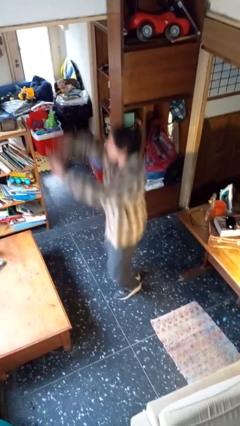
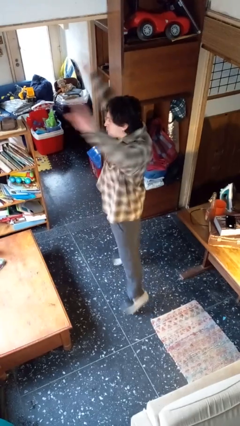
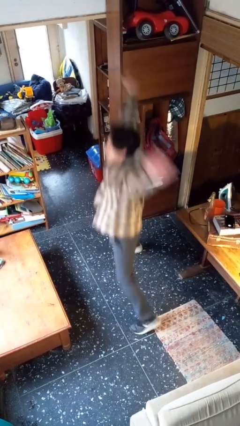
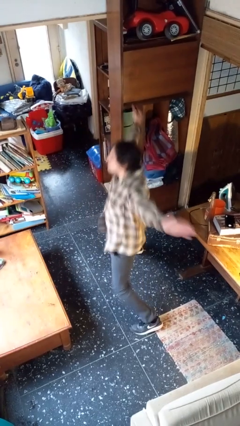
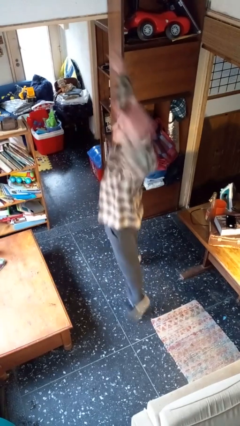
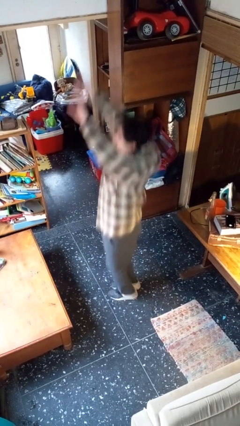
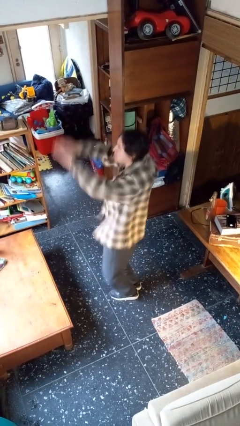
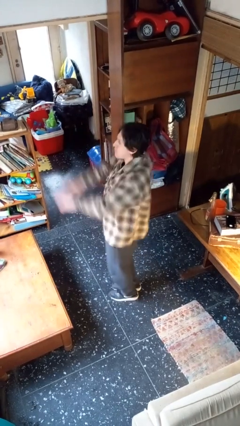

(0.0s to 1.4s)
person exercises with jumping jacks

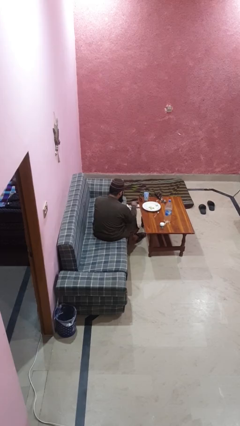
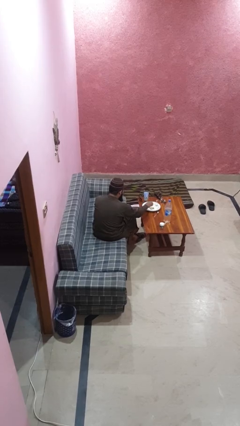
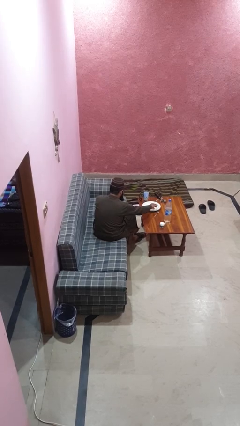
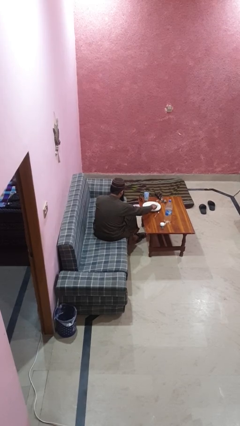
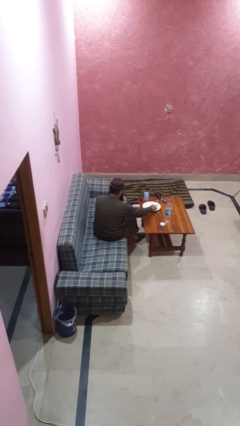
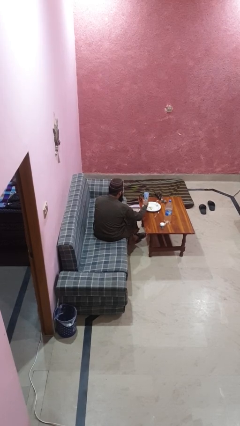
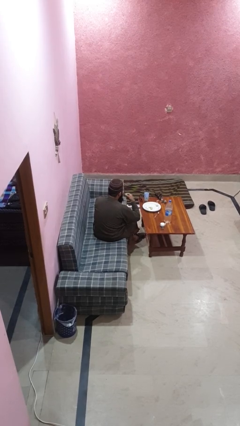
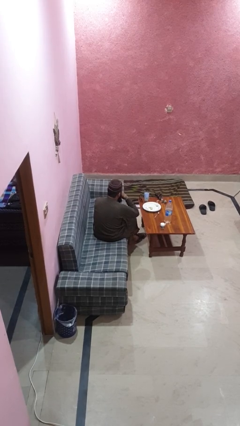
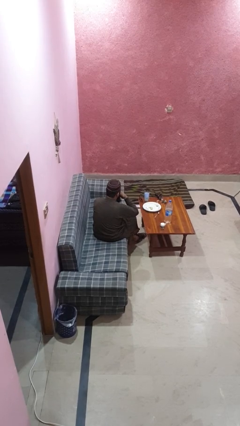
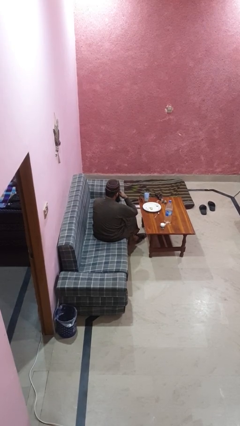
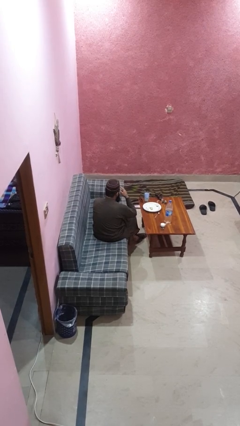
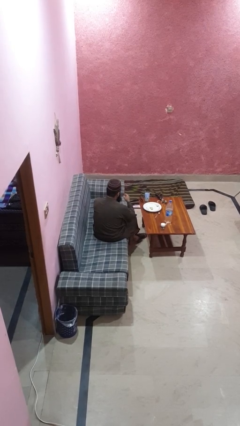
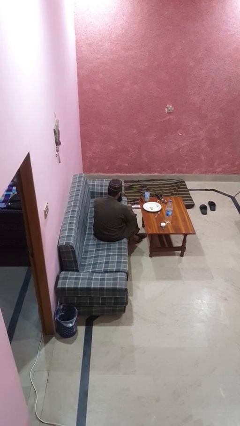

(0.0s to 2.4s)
person eats with hands

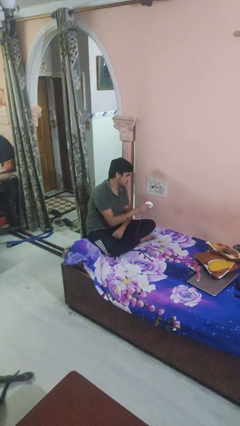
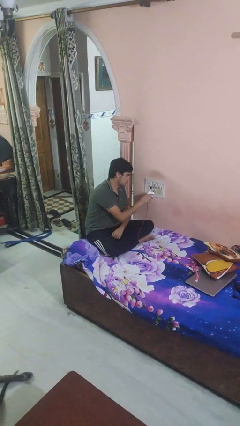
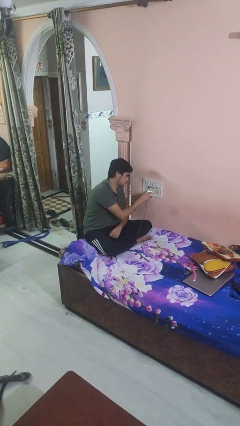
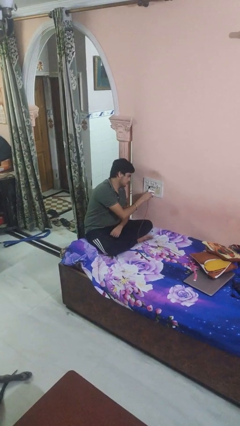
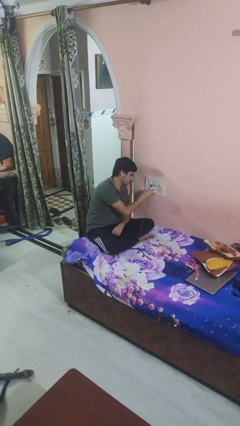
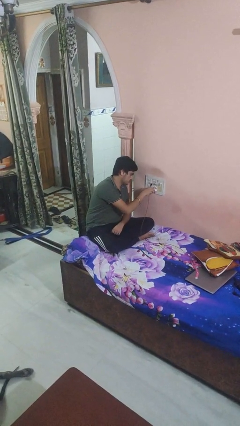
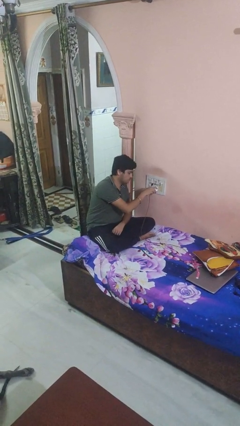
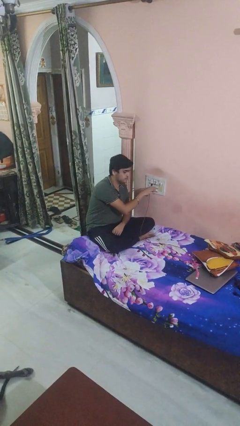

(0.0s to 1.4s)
person plugs into electrical socket

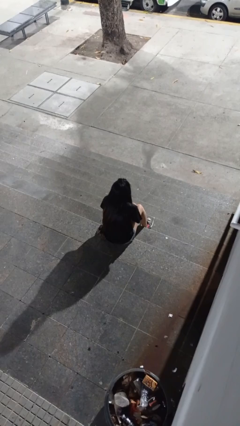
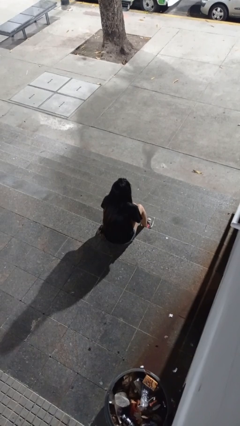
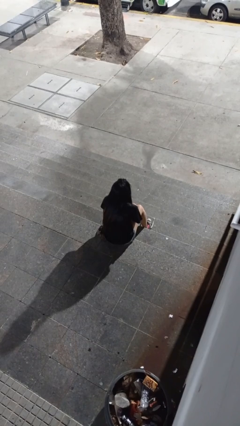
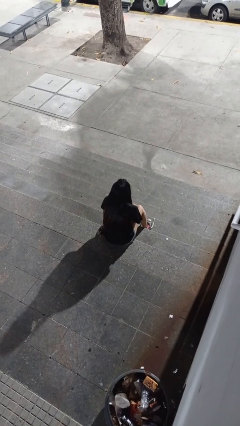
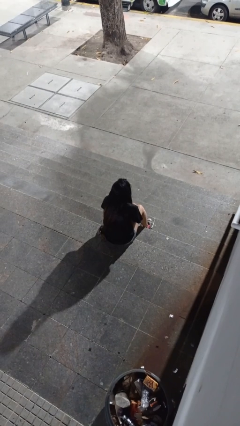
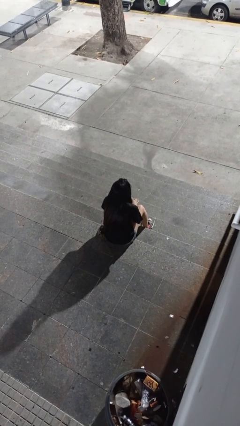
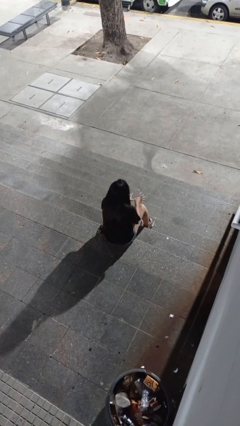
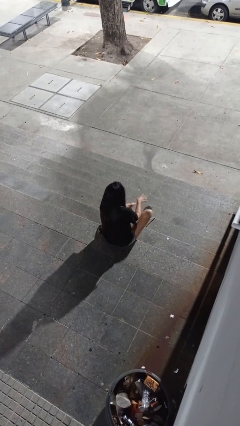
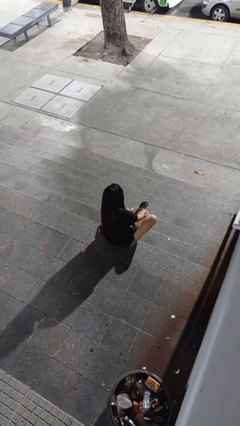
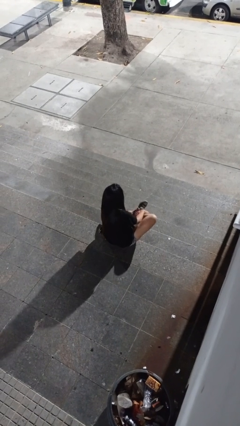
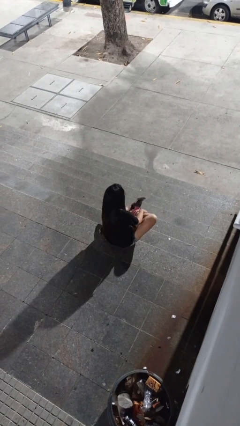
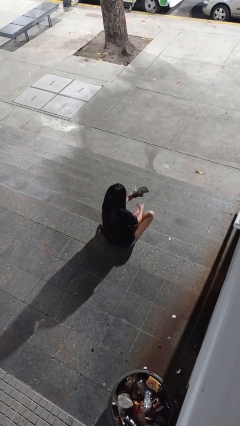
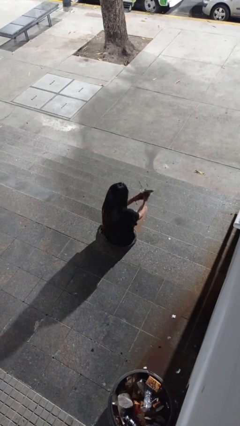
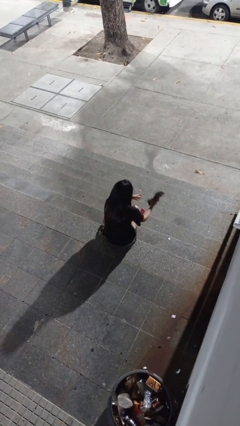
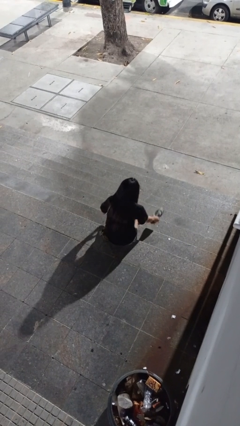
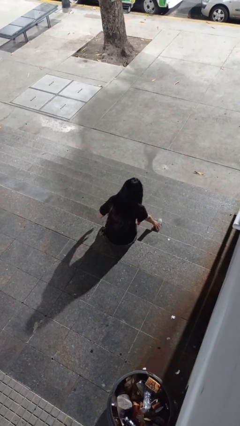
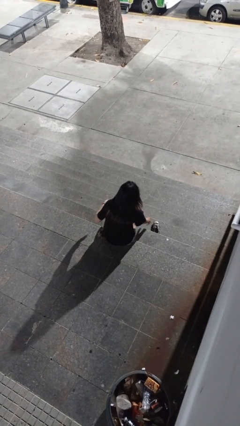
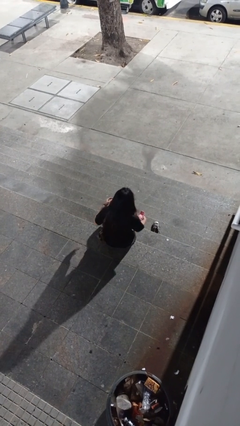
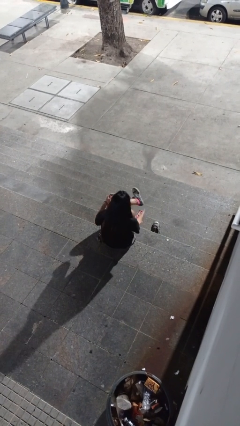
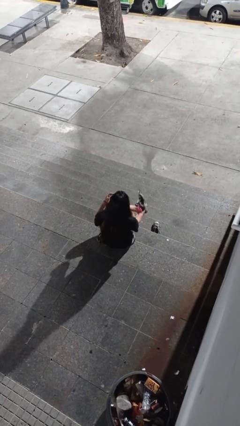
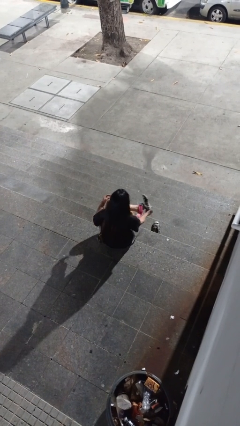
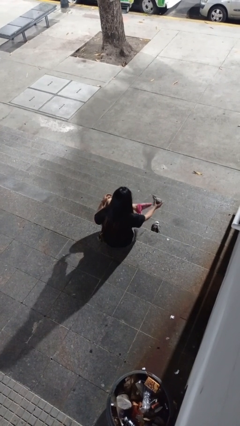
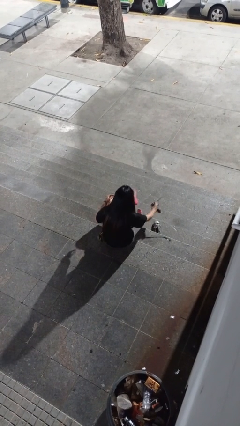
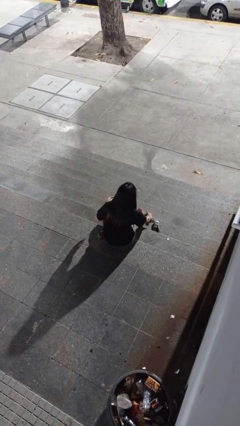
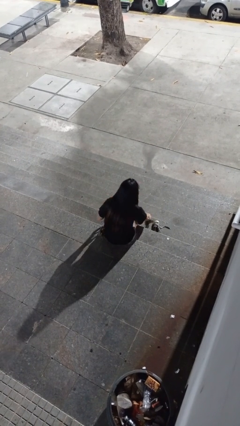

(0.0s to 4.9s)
person takes off shoes

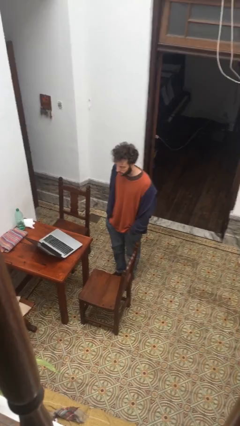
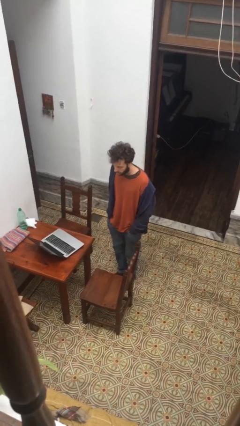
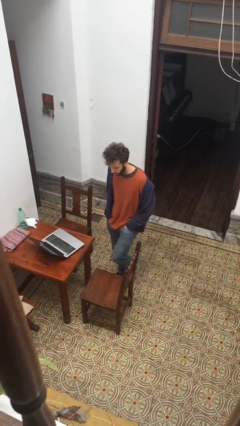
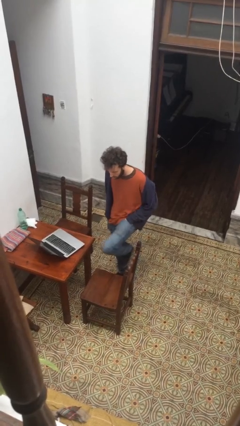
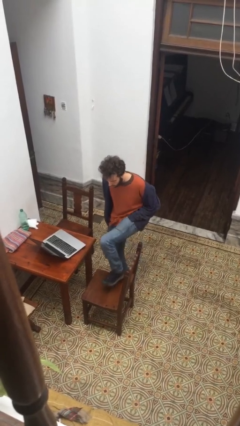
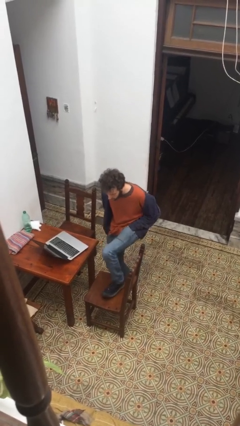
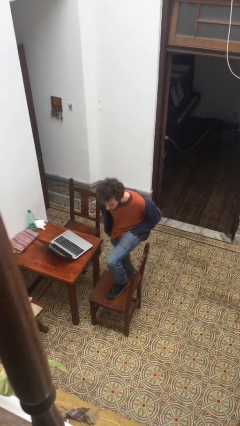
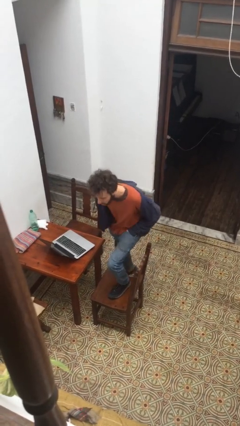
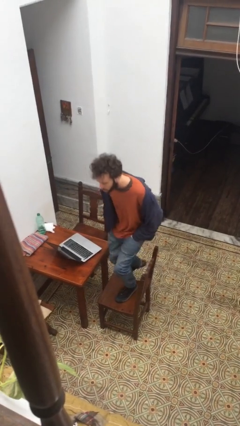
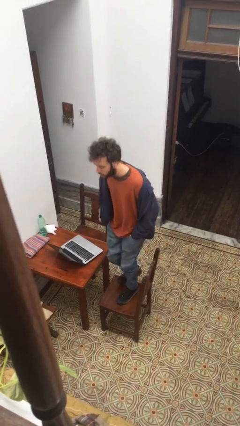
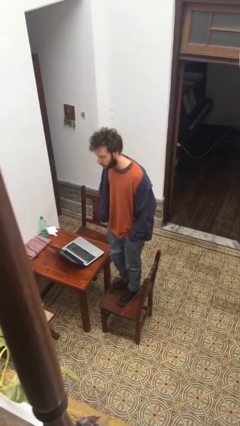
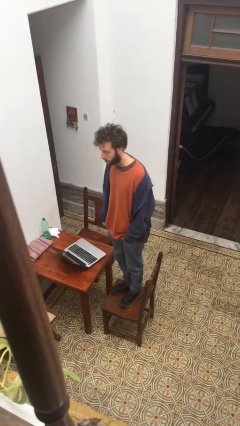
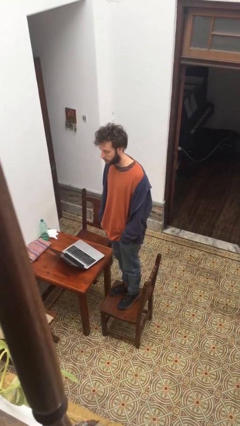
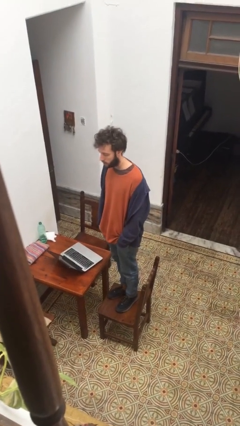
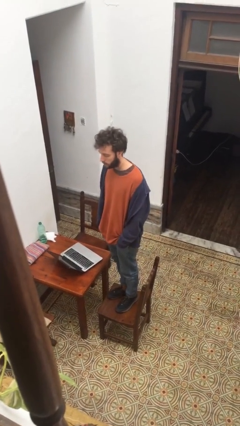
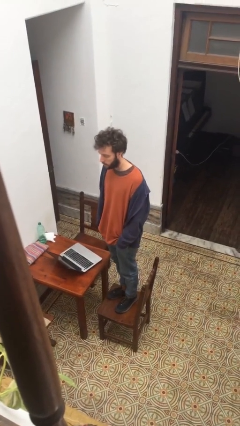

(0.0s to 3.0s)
person climbs on chair

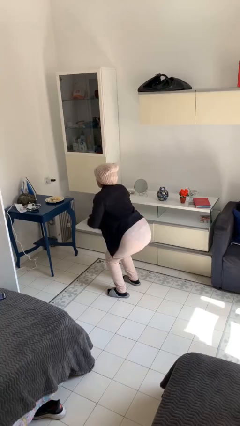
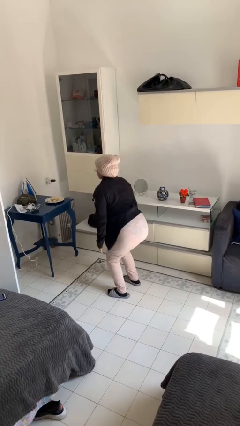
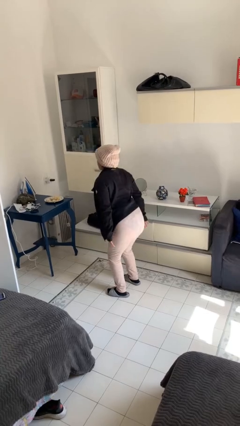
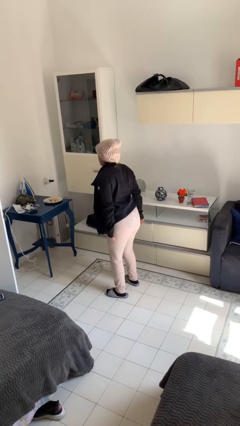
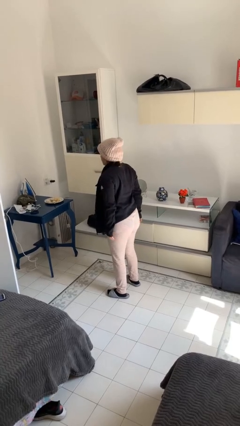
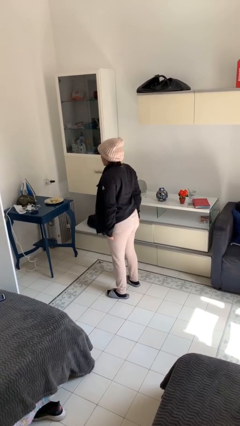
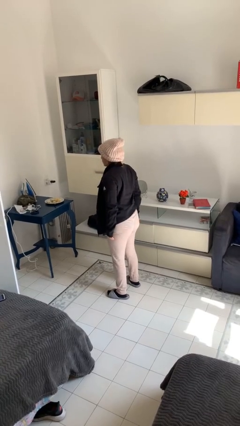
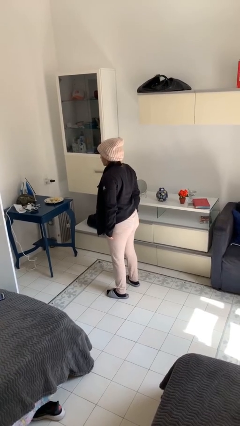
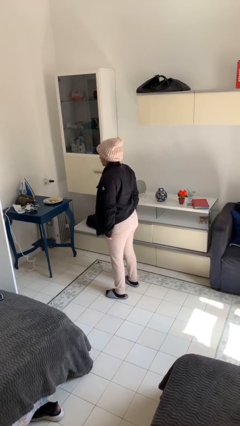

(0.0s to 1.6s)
person stands up

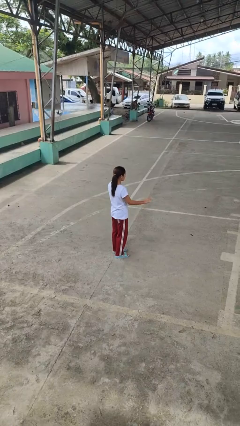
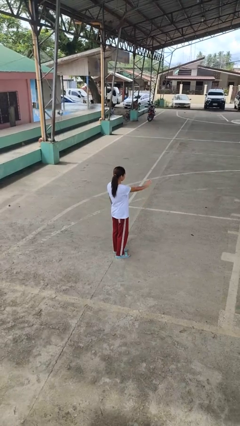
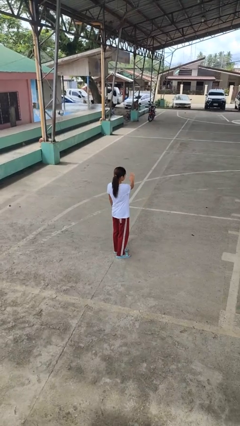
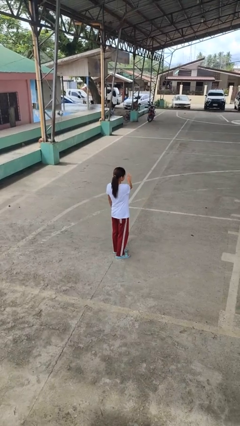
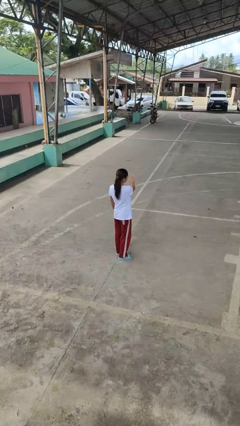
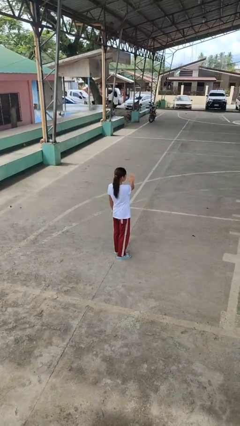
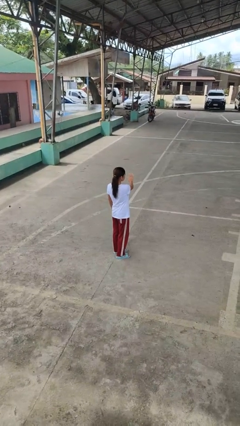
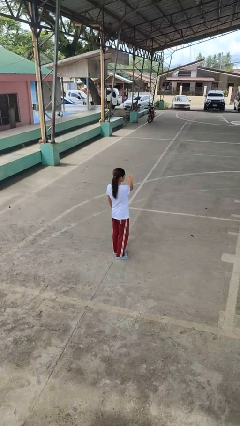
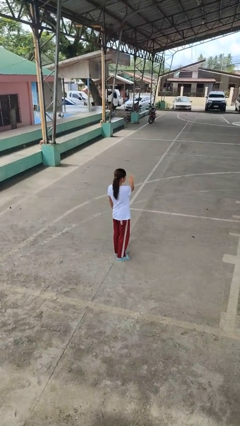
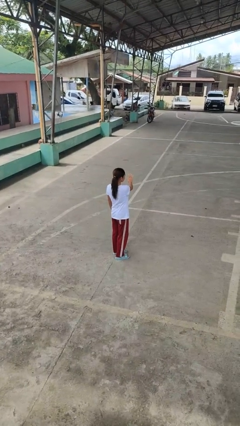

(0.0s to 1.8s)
person gestures swipe left

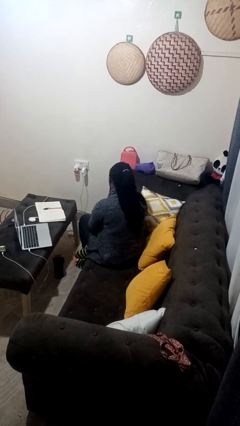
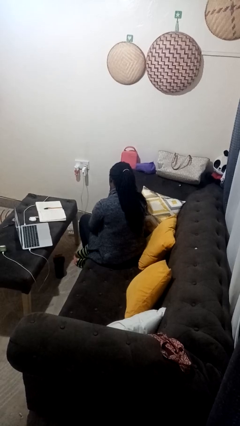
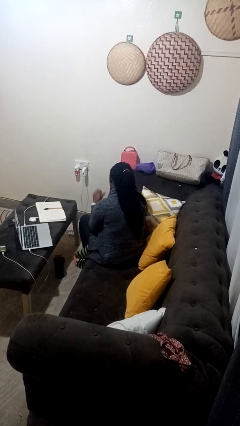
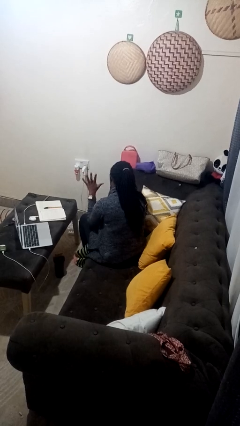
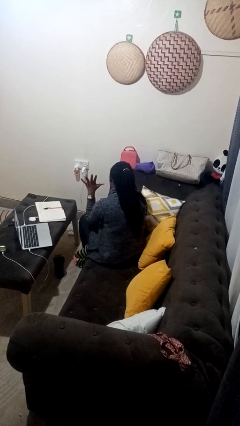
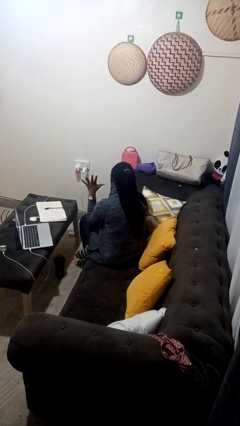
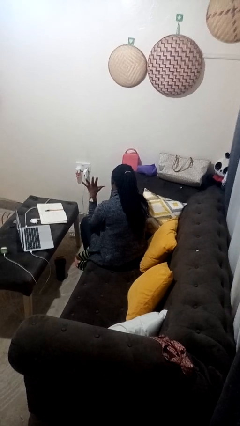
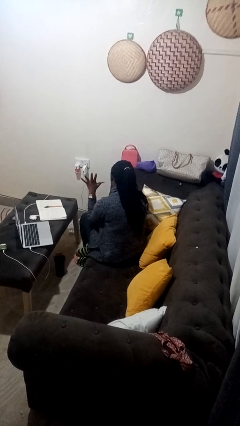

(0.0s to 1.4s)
person gestures number five
